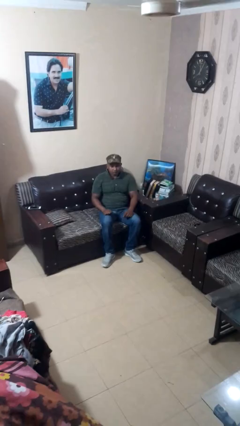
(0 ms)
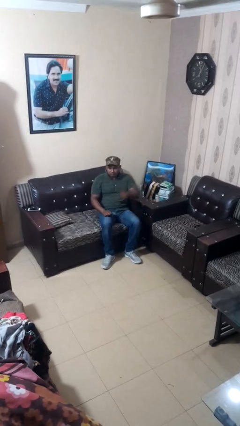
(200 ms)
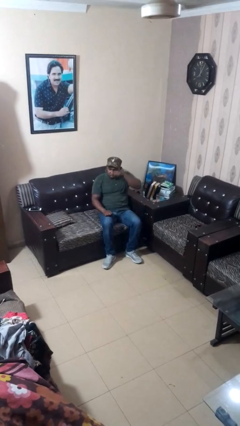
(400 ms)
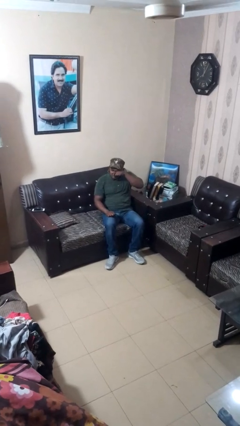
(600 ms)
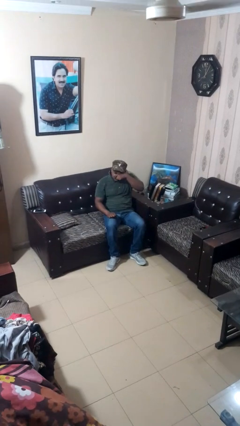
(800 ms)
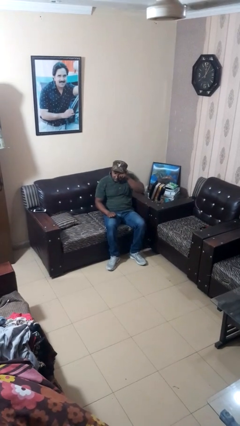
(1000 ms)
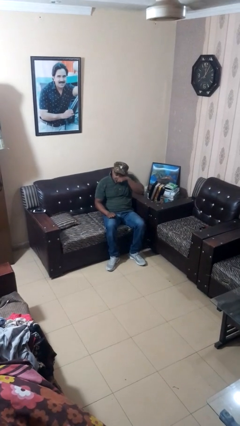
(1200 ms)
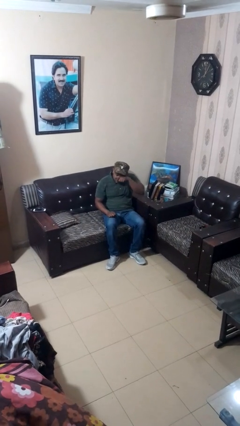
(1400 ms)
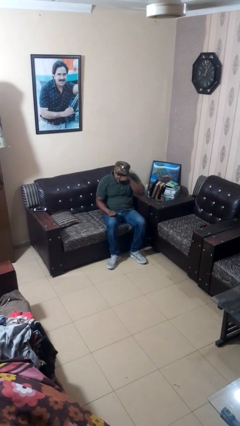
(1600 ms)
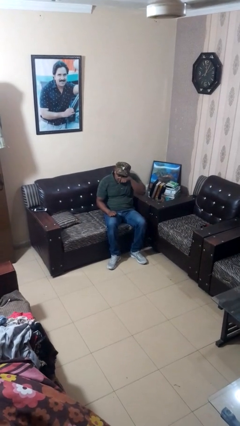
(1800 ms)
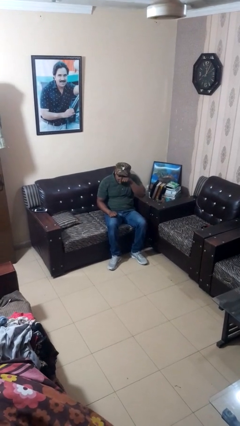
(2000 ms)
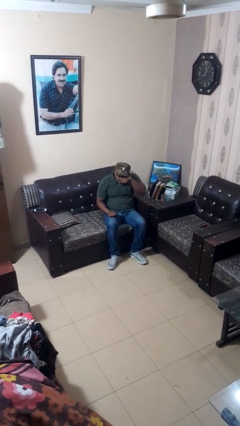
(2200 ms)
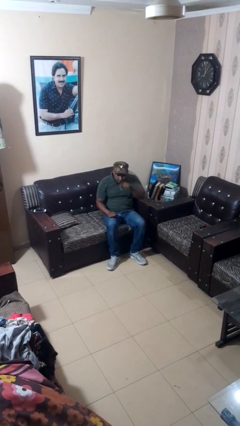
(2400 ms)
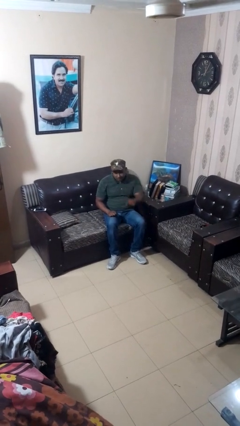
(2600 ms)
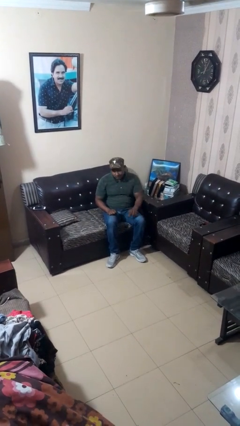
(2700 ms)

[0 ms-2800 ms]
person rubs eyes

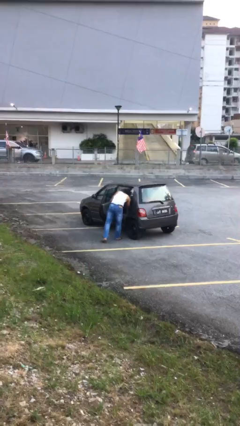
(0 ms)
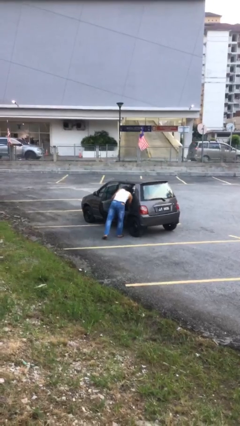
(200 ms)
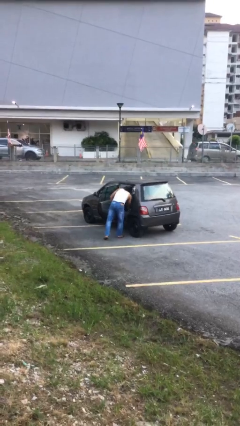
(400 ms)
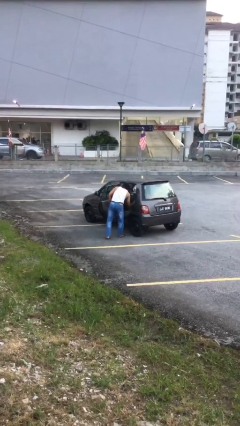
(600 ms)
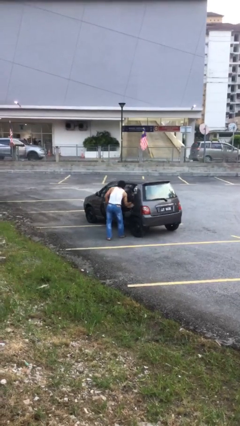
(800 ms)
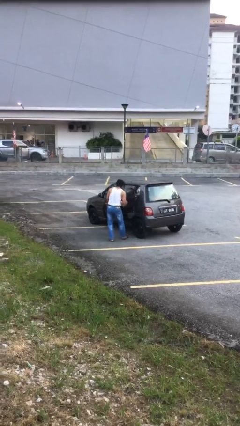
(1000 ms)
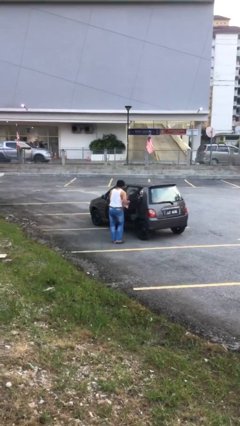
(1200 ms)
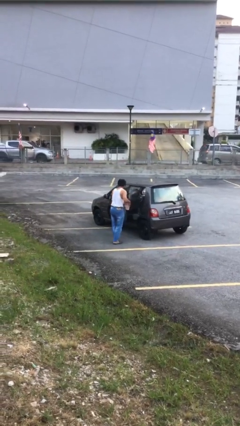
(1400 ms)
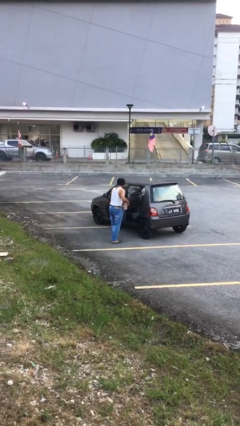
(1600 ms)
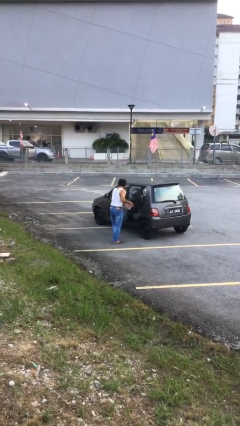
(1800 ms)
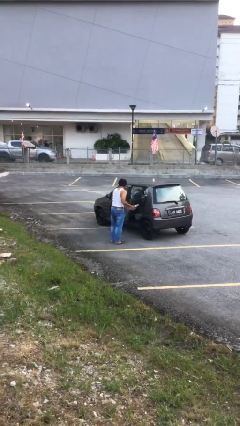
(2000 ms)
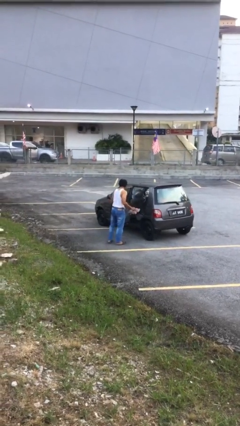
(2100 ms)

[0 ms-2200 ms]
person unloads car

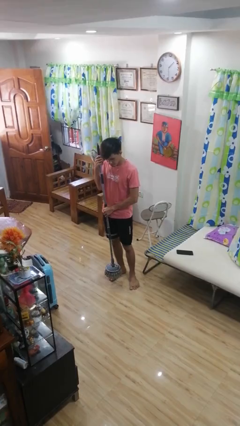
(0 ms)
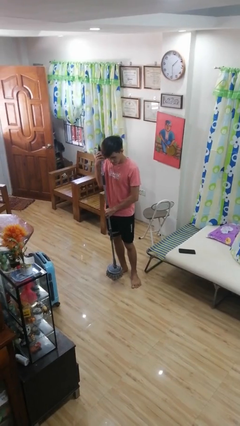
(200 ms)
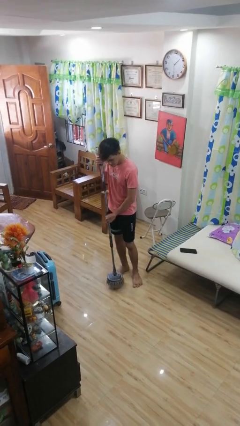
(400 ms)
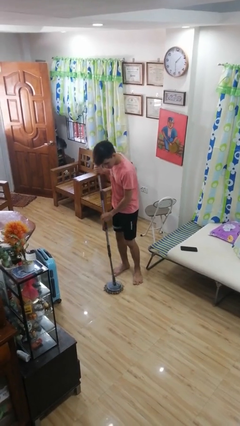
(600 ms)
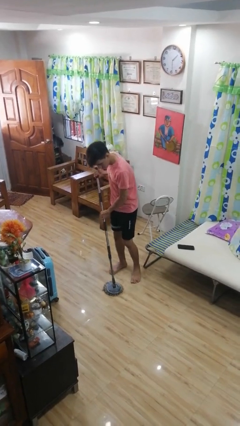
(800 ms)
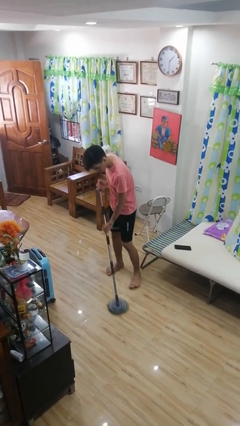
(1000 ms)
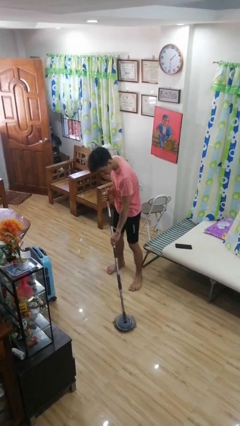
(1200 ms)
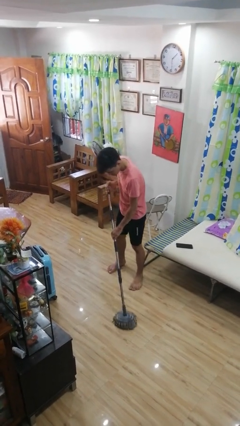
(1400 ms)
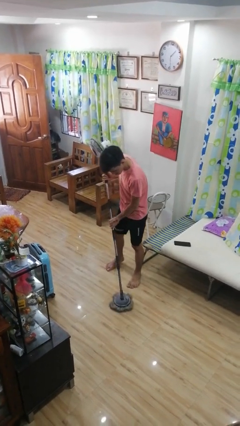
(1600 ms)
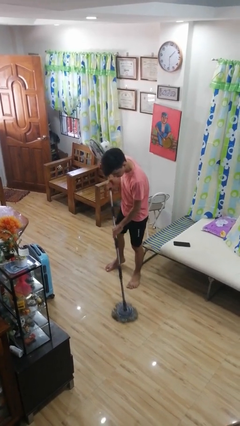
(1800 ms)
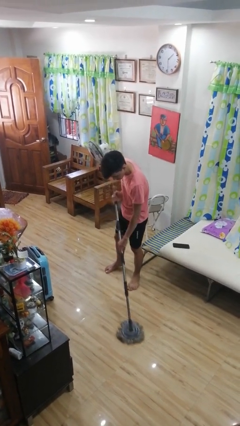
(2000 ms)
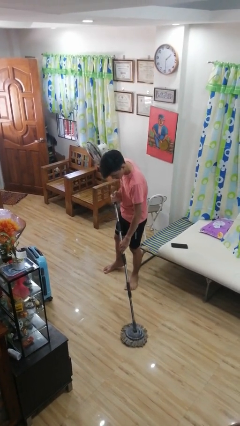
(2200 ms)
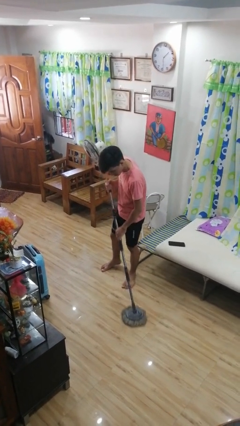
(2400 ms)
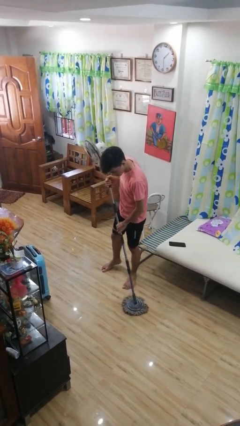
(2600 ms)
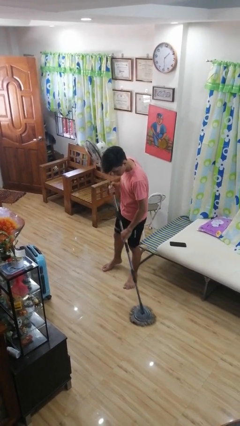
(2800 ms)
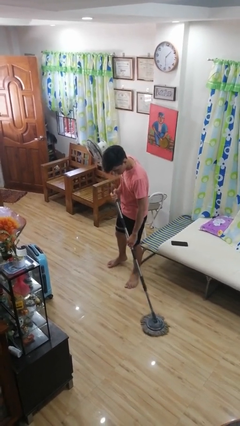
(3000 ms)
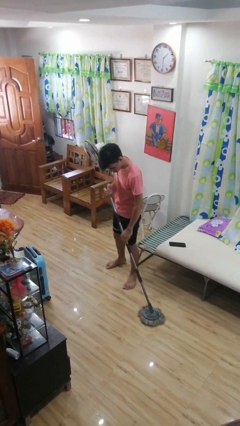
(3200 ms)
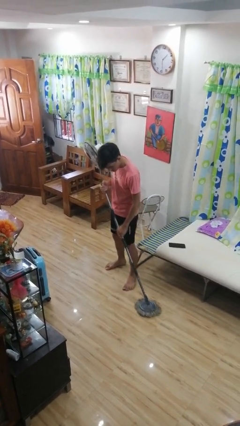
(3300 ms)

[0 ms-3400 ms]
person mops

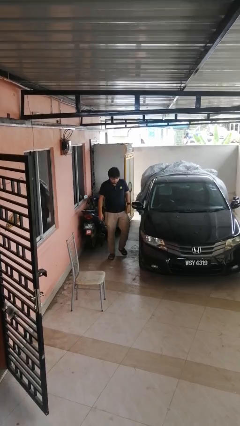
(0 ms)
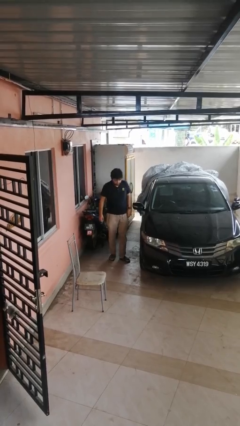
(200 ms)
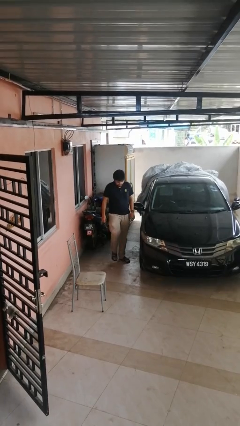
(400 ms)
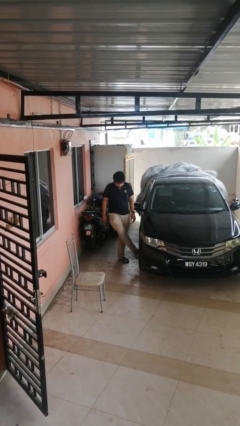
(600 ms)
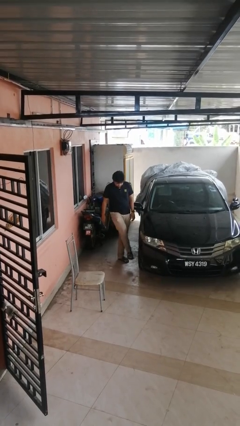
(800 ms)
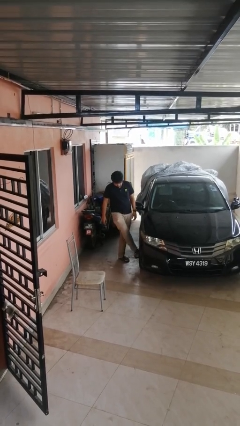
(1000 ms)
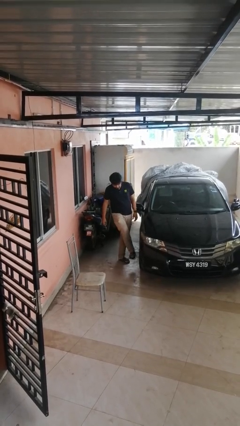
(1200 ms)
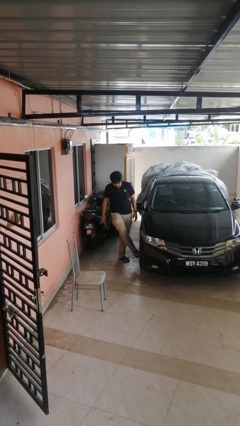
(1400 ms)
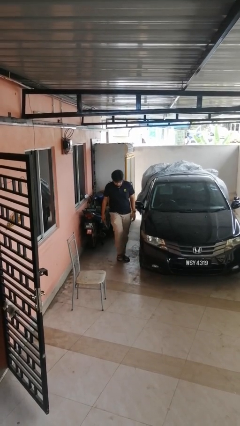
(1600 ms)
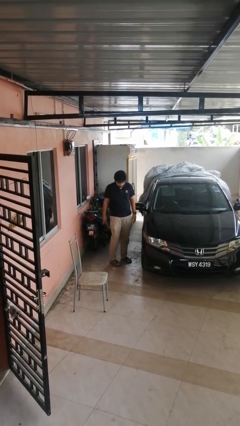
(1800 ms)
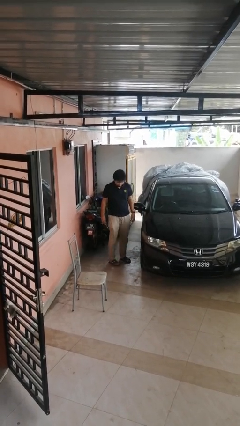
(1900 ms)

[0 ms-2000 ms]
person kicks car tires

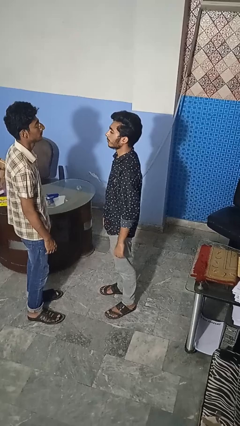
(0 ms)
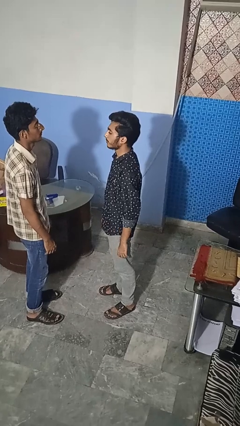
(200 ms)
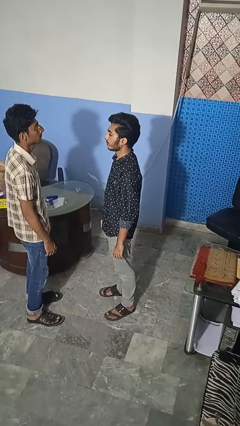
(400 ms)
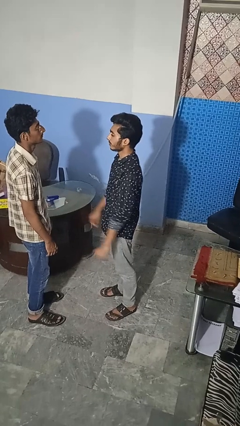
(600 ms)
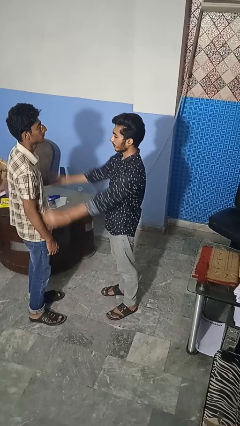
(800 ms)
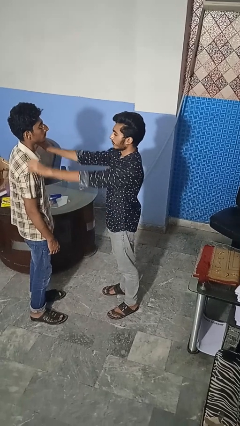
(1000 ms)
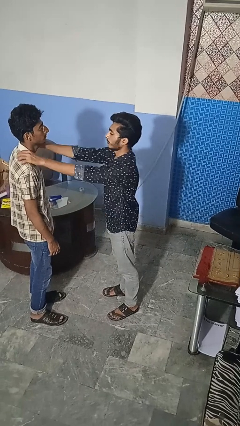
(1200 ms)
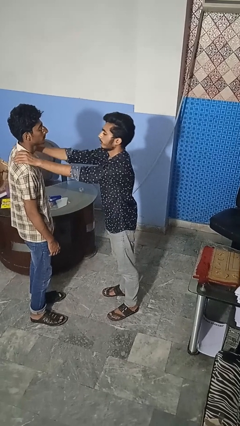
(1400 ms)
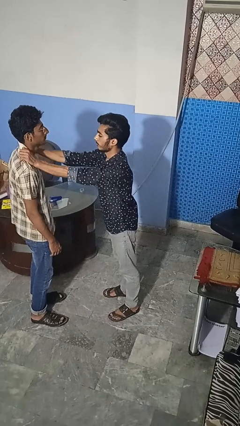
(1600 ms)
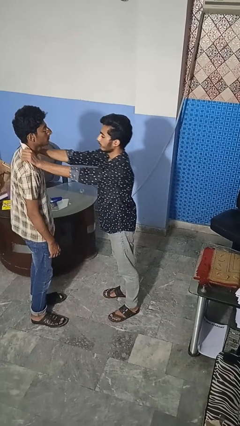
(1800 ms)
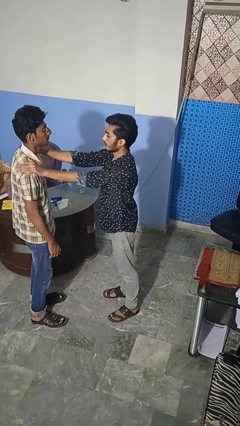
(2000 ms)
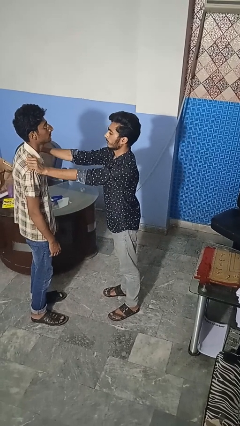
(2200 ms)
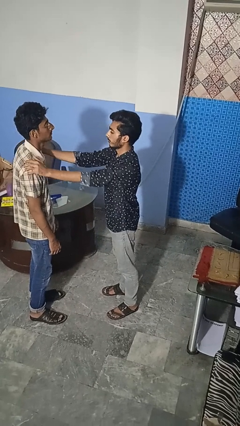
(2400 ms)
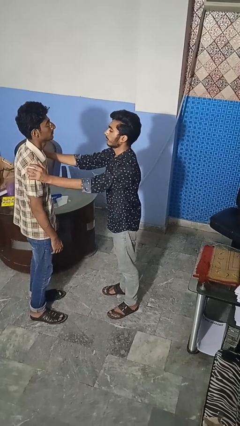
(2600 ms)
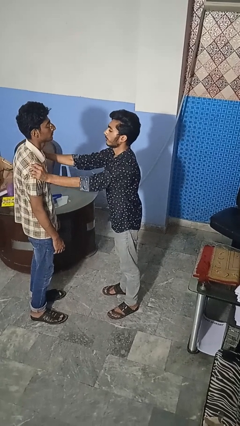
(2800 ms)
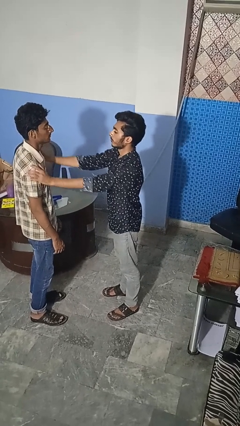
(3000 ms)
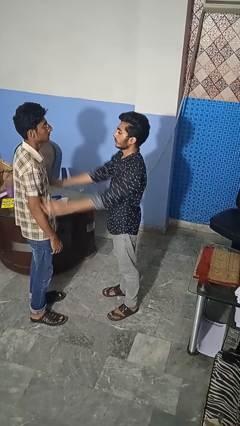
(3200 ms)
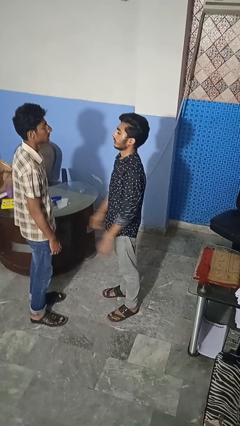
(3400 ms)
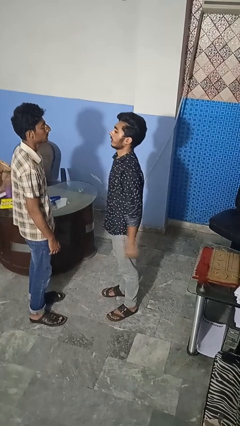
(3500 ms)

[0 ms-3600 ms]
person pounds shoulders of person

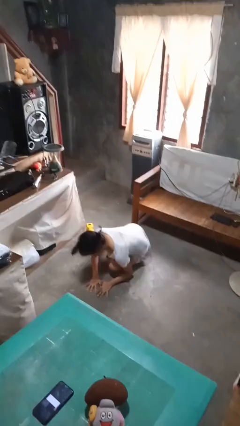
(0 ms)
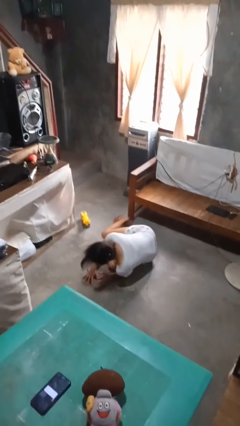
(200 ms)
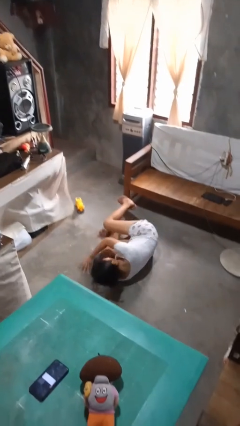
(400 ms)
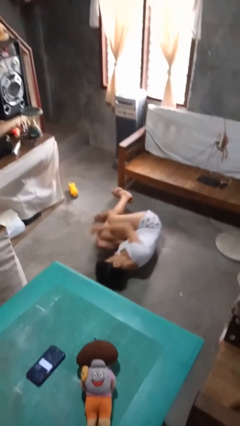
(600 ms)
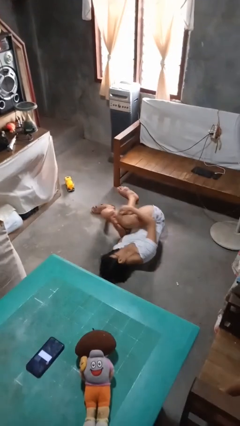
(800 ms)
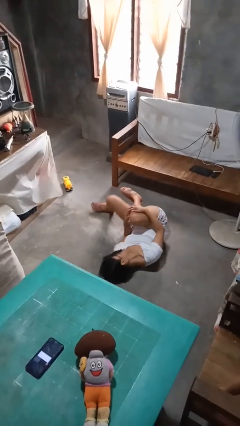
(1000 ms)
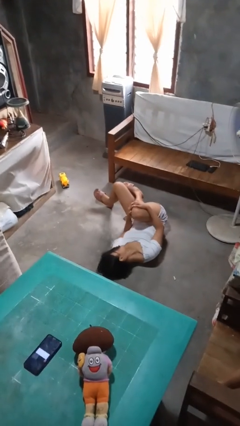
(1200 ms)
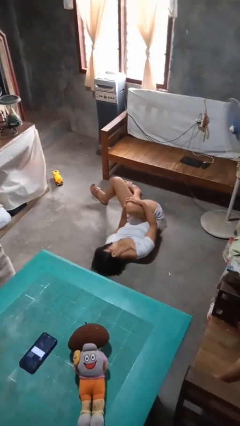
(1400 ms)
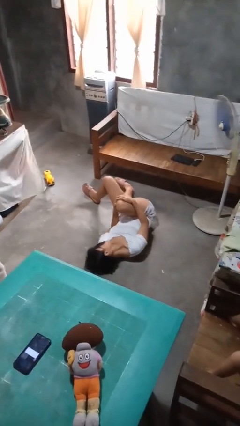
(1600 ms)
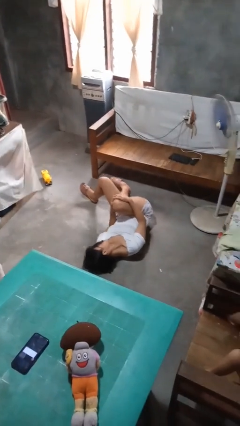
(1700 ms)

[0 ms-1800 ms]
person lies down on floor

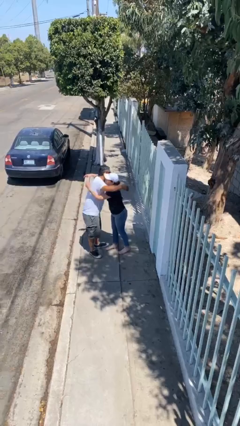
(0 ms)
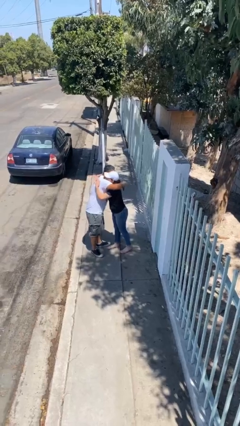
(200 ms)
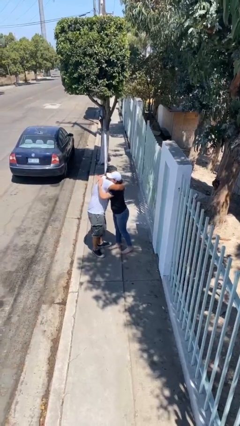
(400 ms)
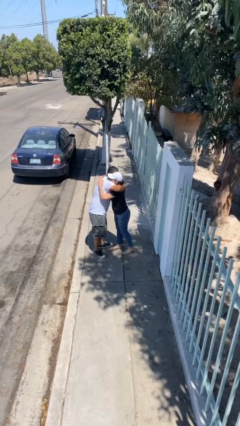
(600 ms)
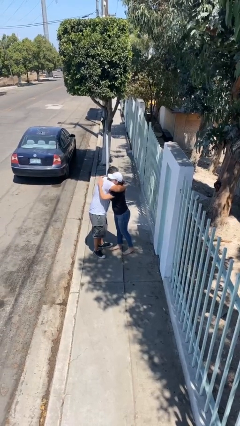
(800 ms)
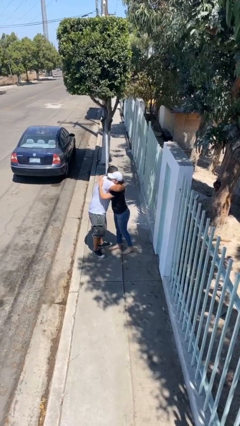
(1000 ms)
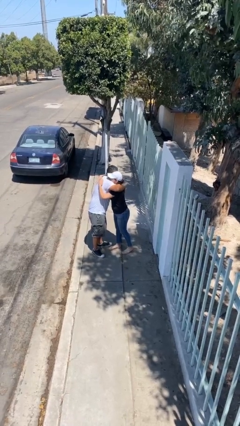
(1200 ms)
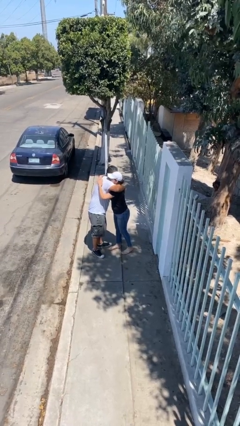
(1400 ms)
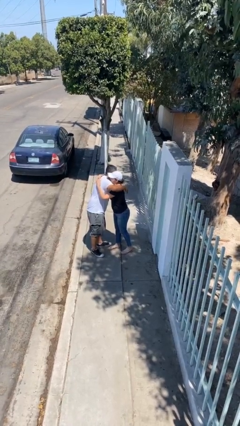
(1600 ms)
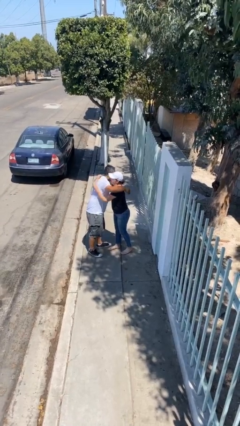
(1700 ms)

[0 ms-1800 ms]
person embraces person
